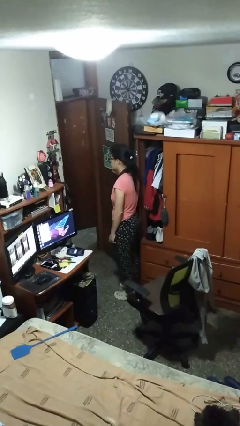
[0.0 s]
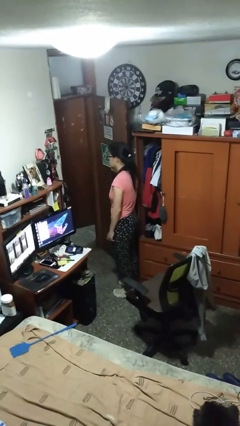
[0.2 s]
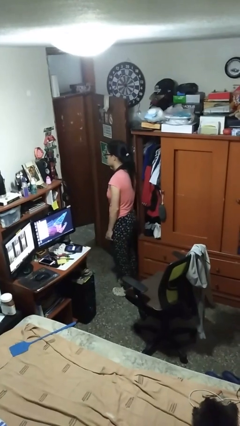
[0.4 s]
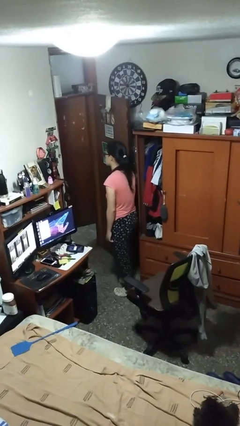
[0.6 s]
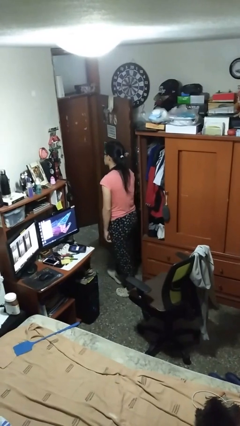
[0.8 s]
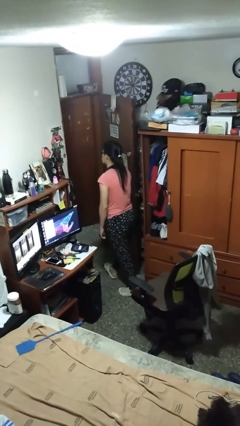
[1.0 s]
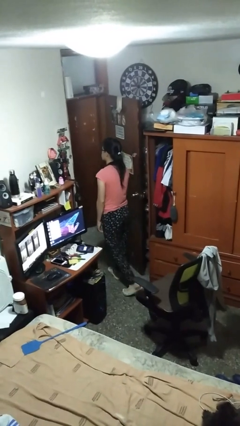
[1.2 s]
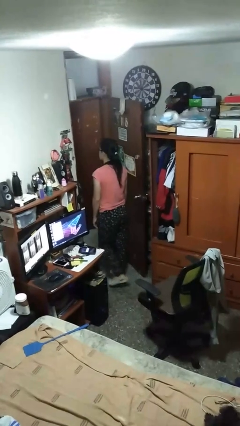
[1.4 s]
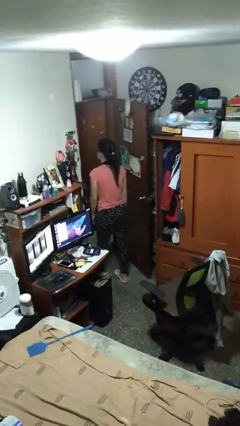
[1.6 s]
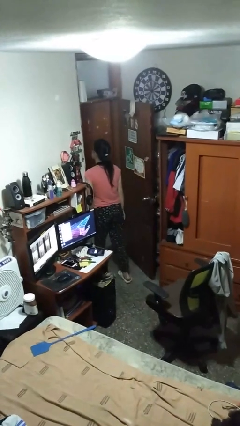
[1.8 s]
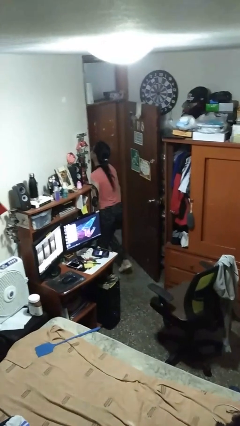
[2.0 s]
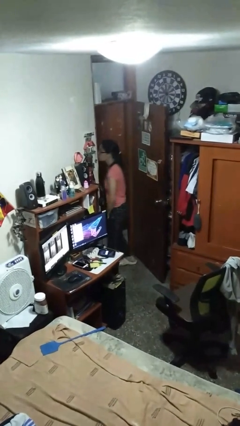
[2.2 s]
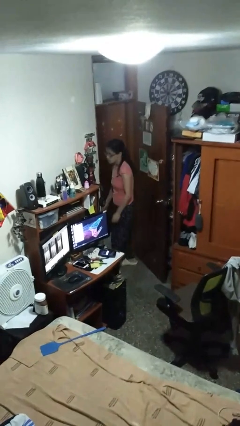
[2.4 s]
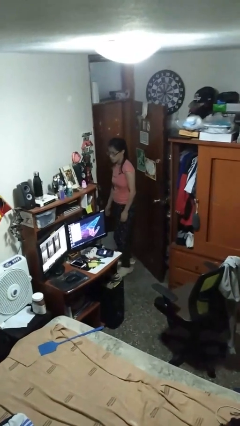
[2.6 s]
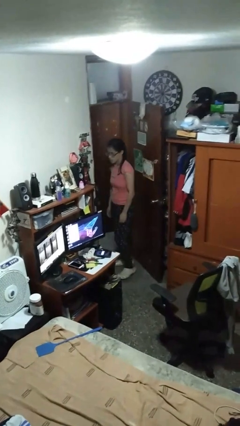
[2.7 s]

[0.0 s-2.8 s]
person bumps into wall

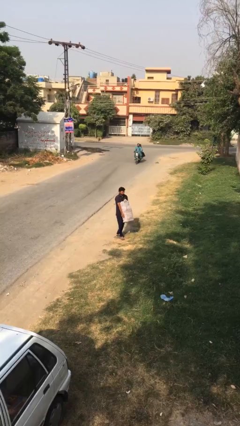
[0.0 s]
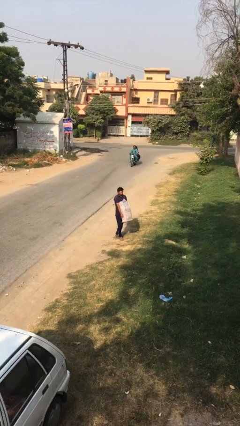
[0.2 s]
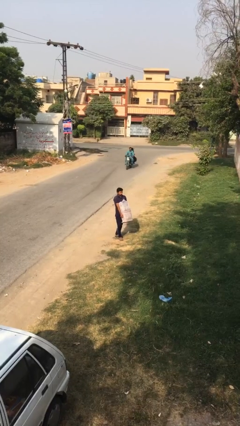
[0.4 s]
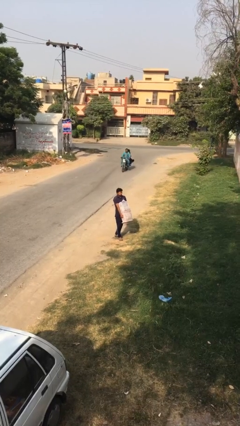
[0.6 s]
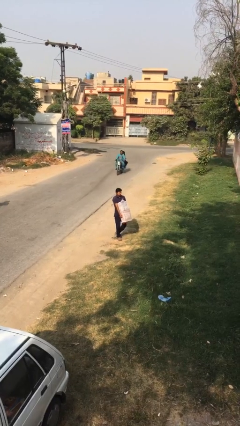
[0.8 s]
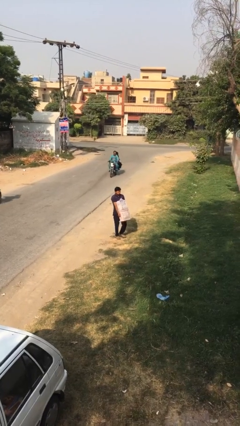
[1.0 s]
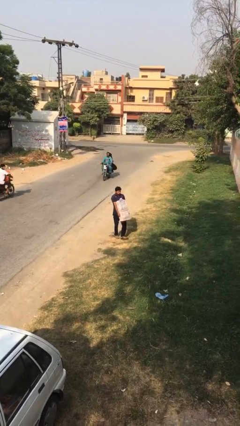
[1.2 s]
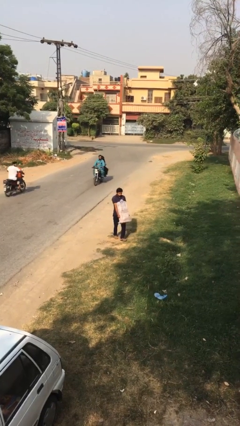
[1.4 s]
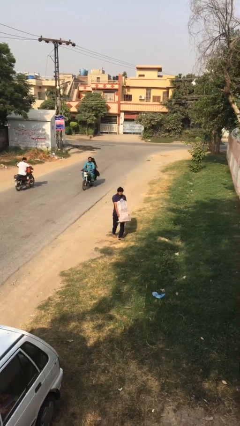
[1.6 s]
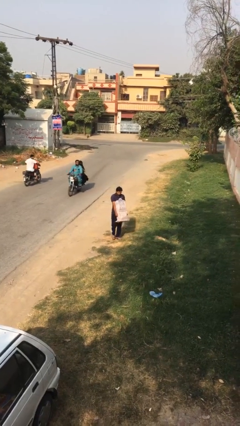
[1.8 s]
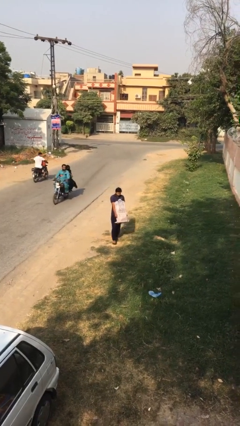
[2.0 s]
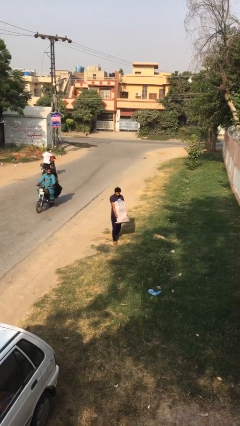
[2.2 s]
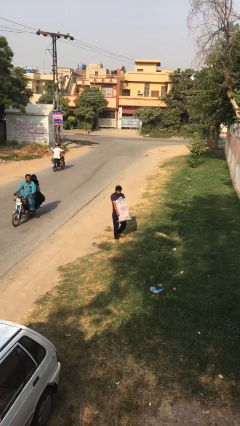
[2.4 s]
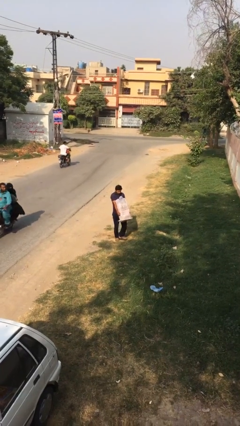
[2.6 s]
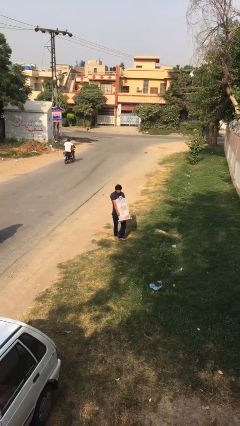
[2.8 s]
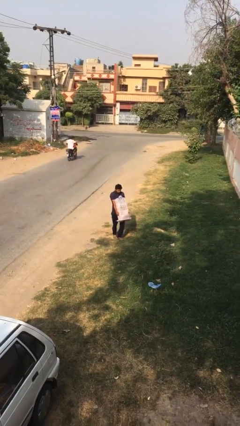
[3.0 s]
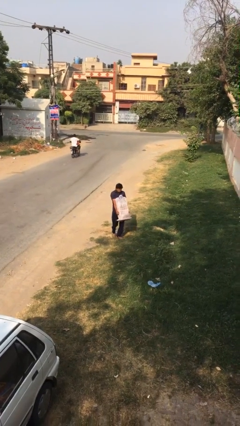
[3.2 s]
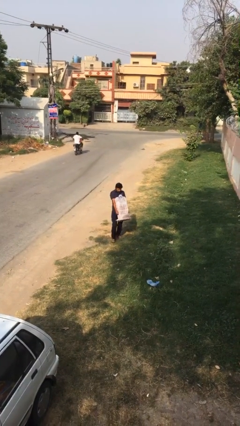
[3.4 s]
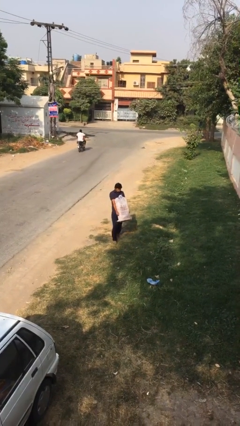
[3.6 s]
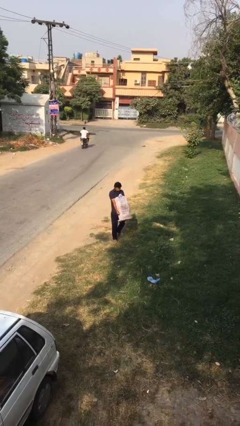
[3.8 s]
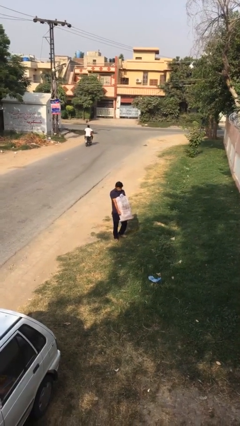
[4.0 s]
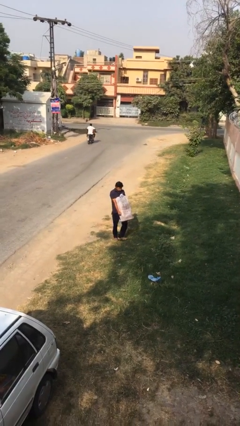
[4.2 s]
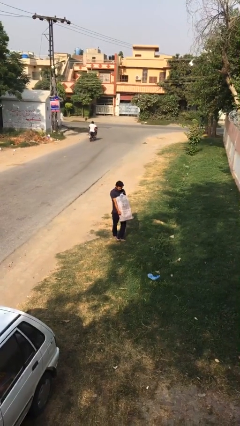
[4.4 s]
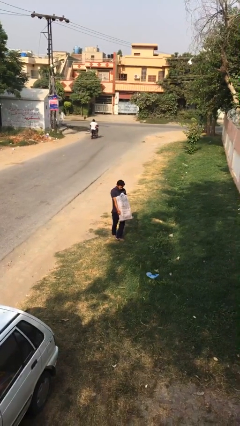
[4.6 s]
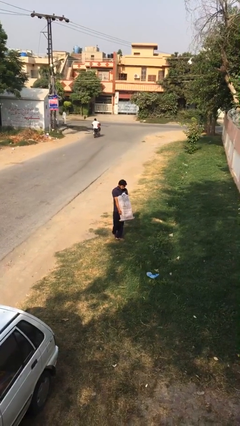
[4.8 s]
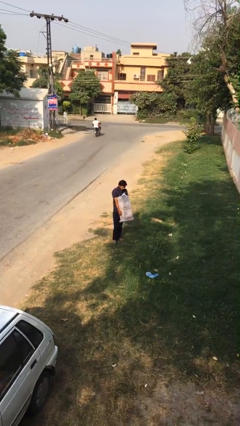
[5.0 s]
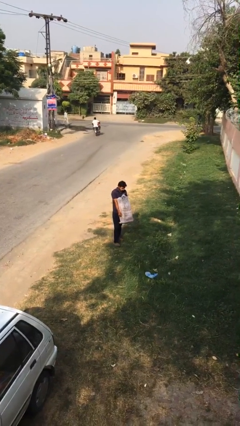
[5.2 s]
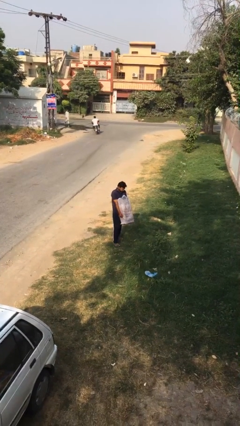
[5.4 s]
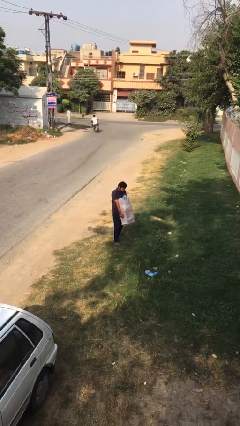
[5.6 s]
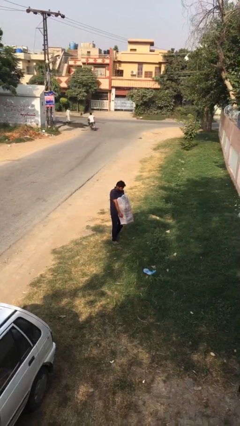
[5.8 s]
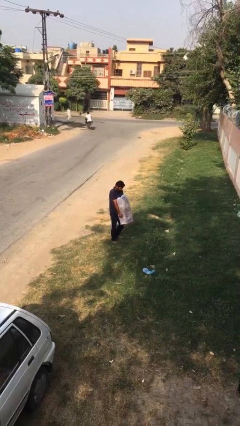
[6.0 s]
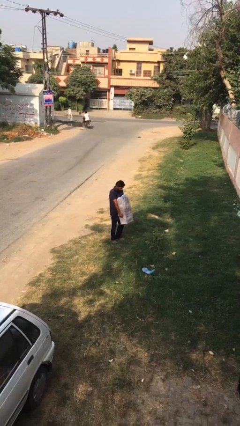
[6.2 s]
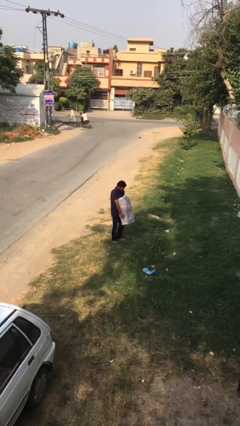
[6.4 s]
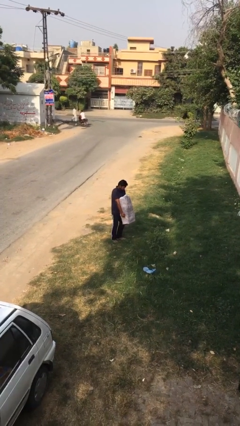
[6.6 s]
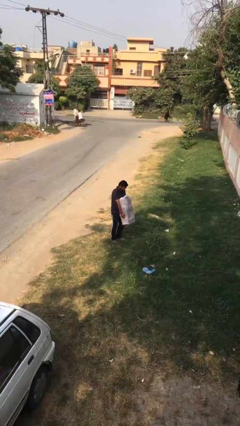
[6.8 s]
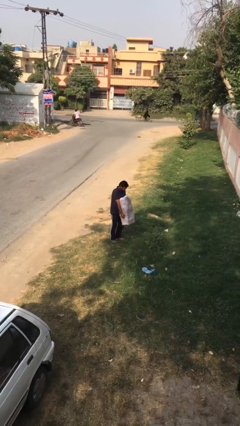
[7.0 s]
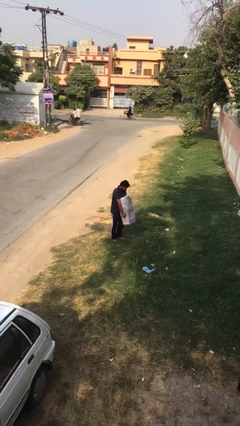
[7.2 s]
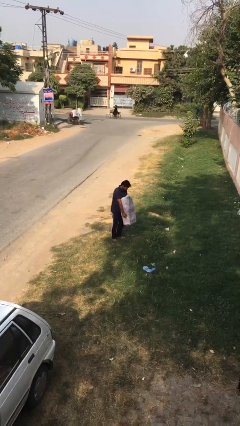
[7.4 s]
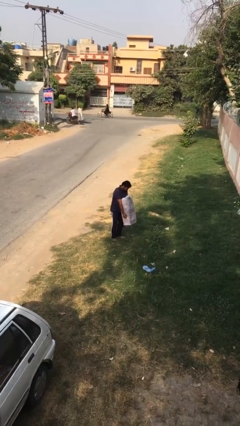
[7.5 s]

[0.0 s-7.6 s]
person carries heavy object

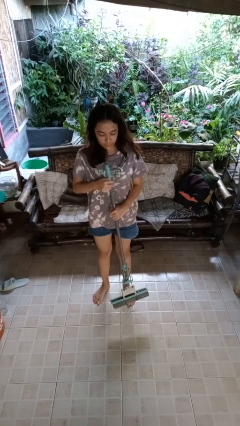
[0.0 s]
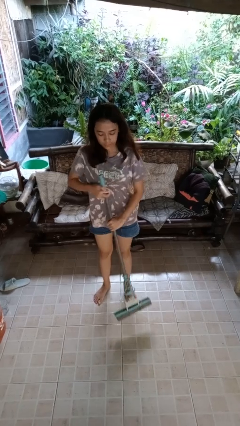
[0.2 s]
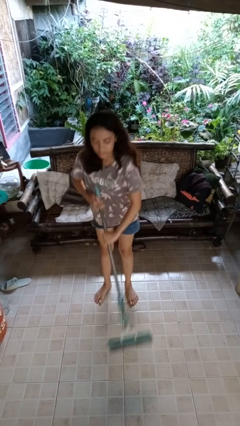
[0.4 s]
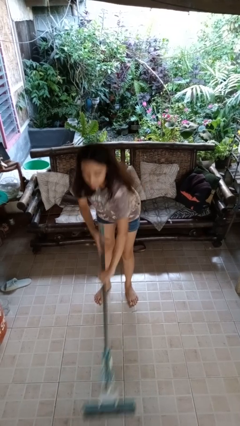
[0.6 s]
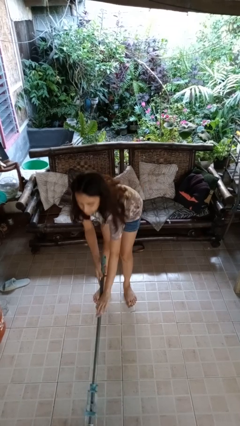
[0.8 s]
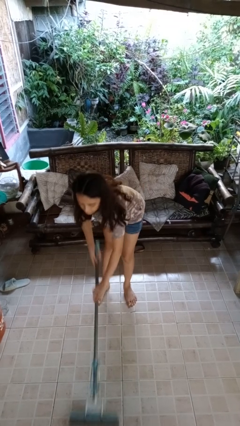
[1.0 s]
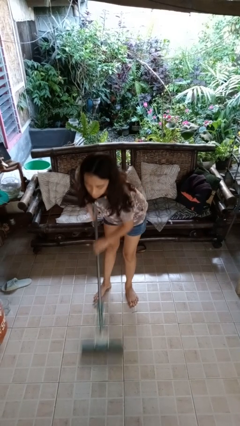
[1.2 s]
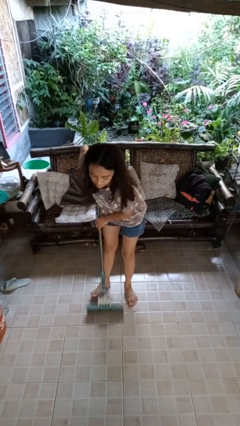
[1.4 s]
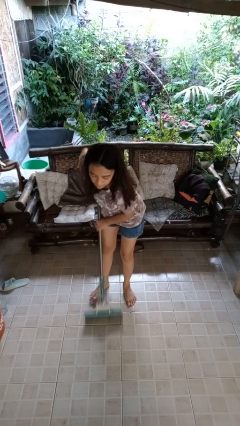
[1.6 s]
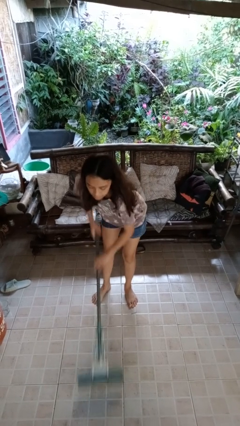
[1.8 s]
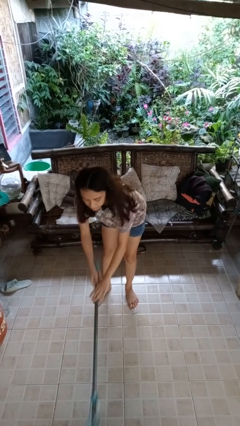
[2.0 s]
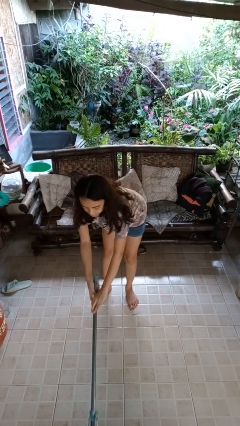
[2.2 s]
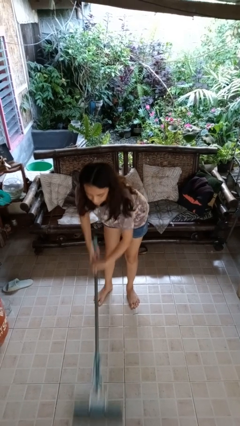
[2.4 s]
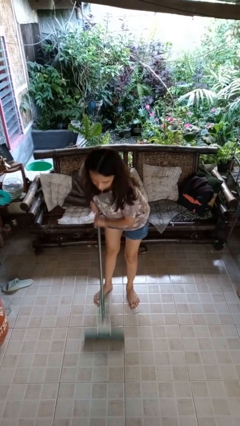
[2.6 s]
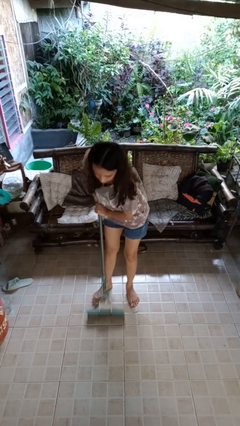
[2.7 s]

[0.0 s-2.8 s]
person mops

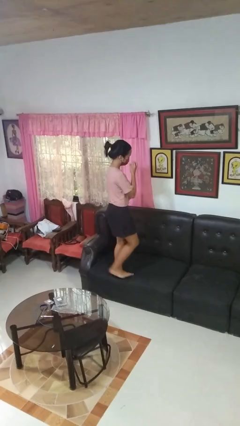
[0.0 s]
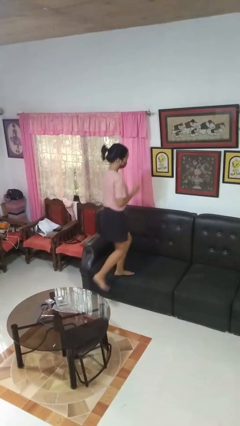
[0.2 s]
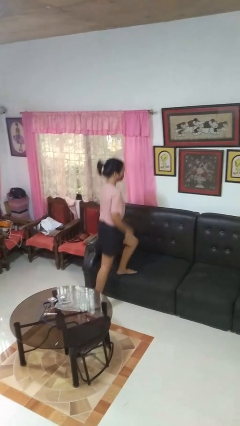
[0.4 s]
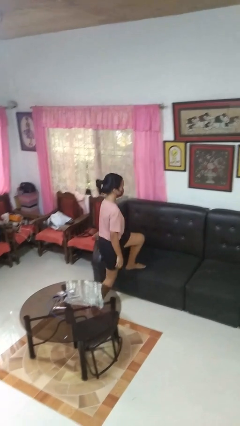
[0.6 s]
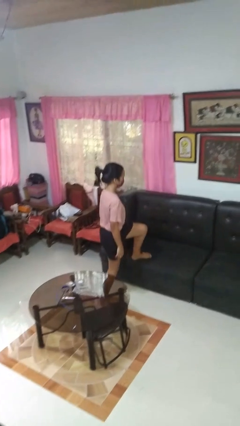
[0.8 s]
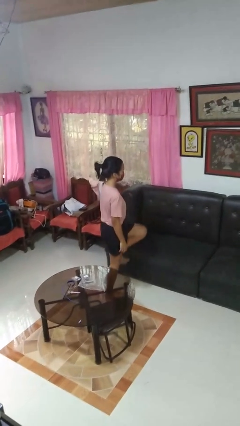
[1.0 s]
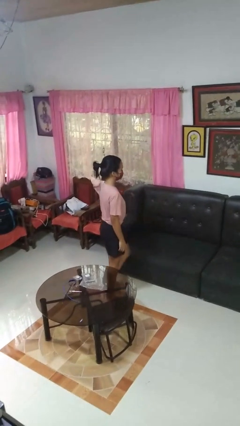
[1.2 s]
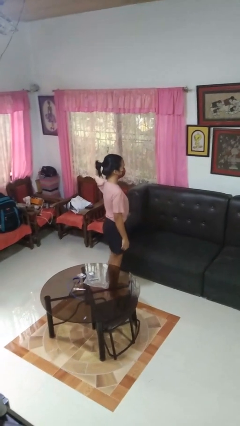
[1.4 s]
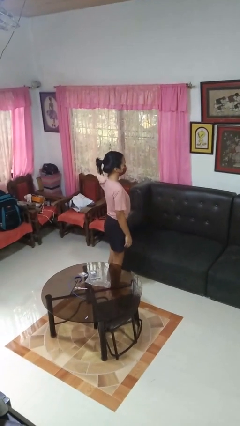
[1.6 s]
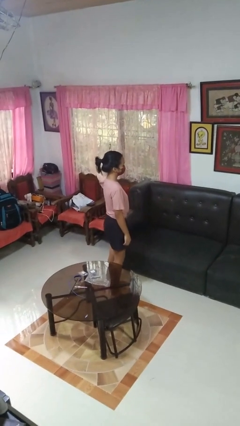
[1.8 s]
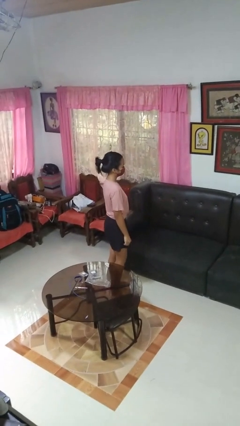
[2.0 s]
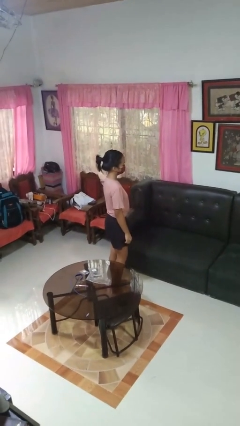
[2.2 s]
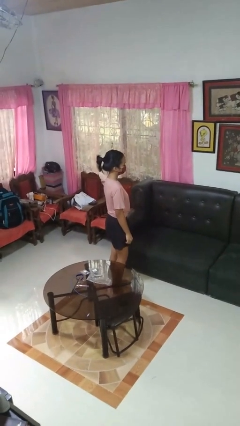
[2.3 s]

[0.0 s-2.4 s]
person climbs off couch

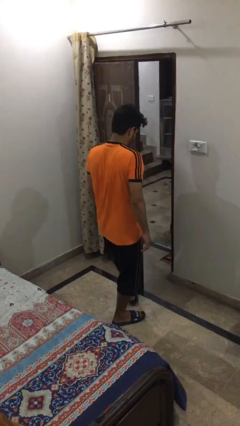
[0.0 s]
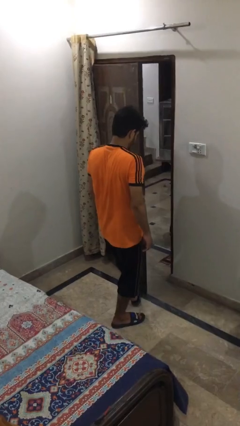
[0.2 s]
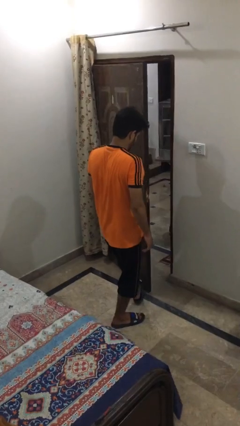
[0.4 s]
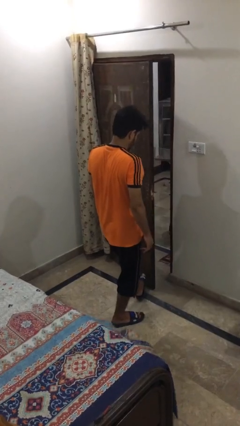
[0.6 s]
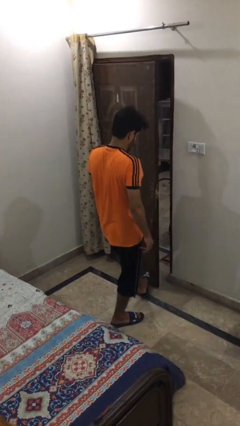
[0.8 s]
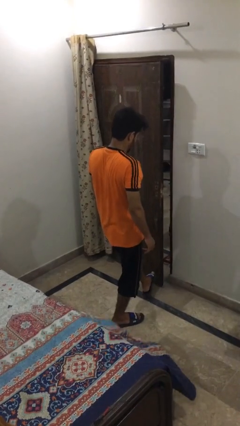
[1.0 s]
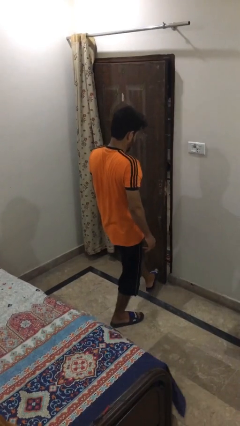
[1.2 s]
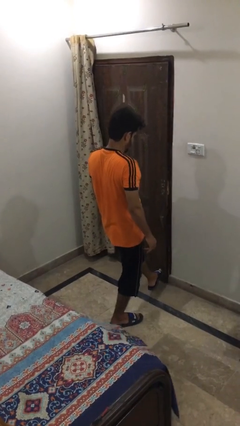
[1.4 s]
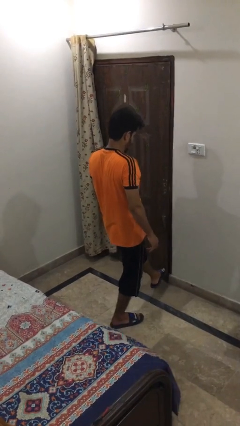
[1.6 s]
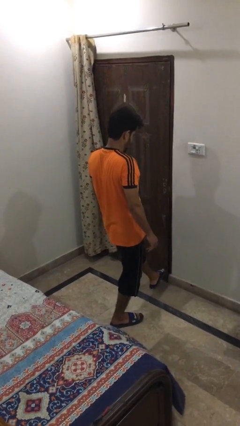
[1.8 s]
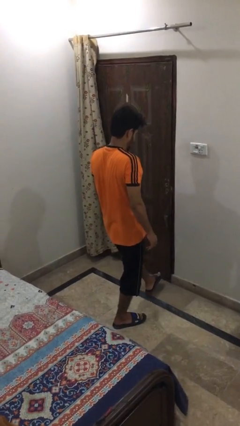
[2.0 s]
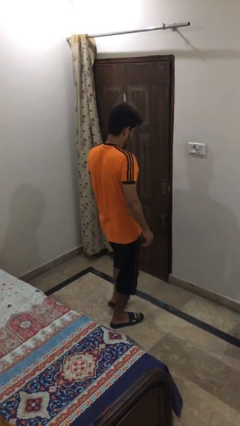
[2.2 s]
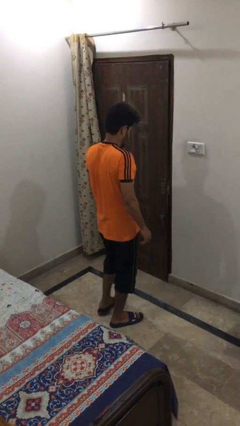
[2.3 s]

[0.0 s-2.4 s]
person closes door with foot
